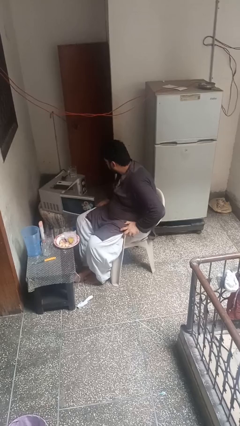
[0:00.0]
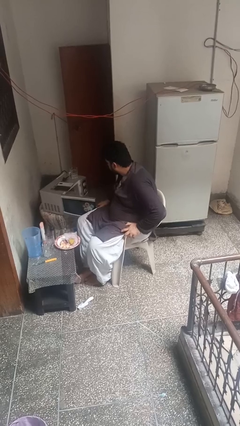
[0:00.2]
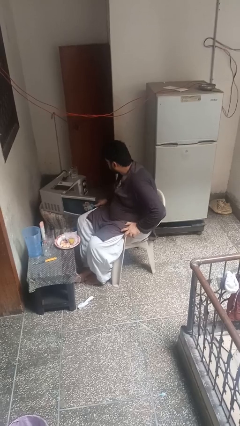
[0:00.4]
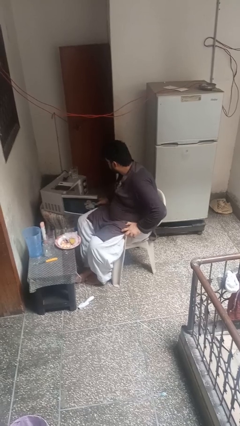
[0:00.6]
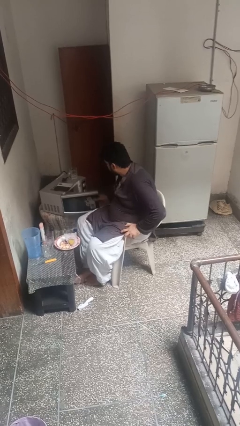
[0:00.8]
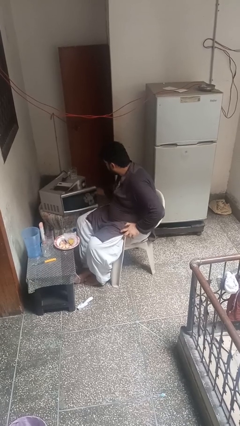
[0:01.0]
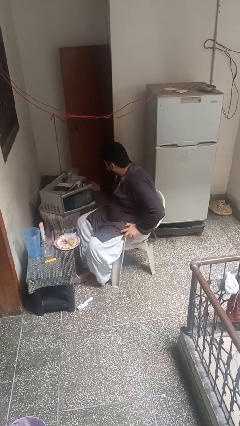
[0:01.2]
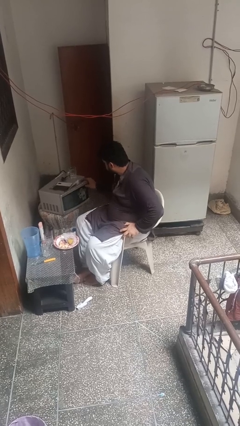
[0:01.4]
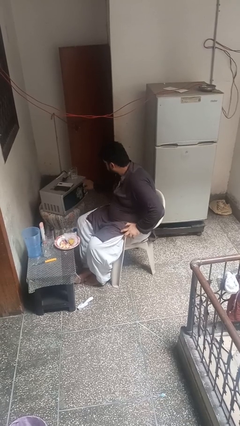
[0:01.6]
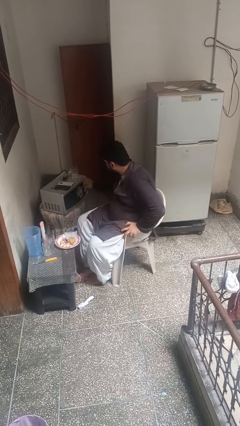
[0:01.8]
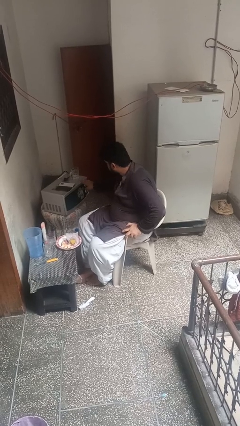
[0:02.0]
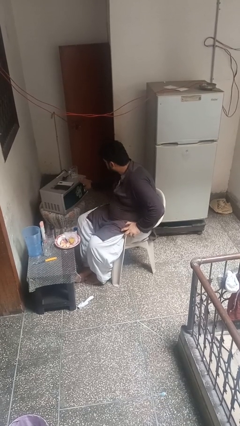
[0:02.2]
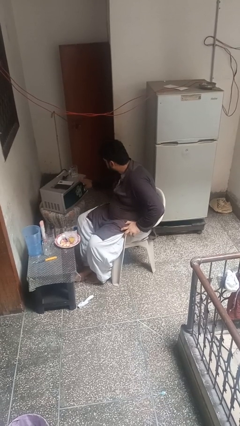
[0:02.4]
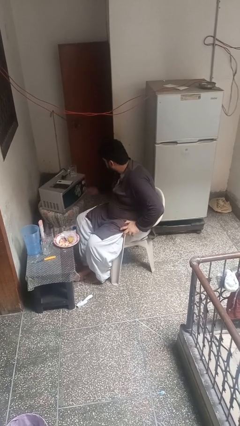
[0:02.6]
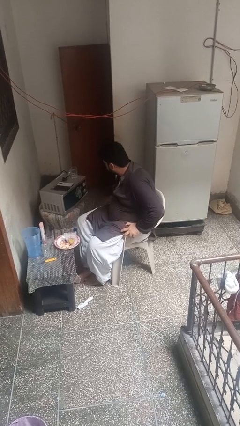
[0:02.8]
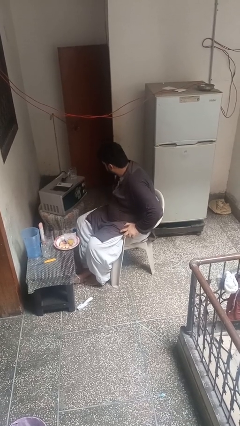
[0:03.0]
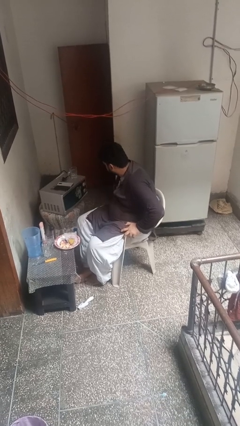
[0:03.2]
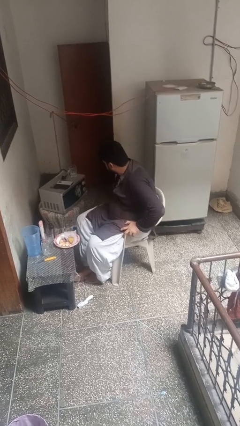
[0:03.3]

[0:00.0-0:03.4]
person closes microwave

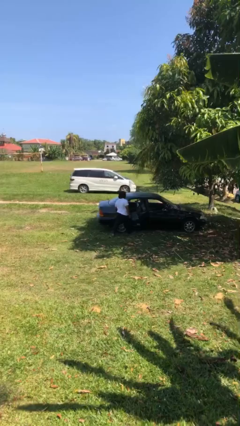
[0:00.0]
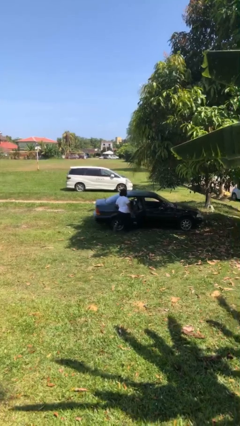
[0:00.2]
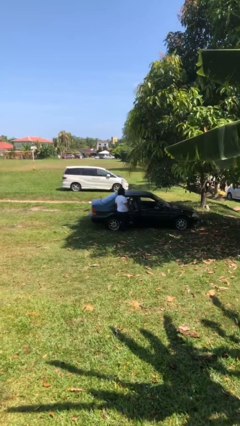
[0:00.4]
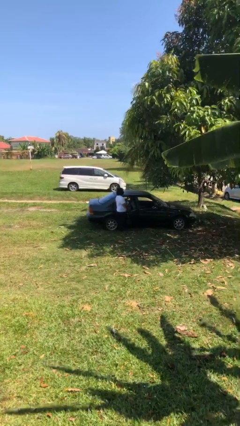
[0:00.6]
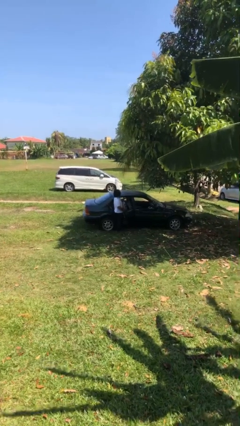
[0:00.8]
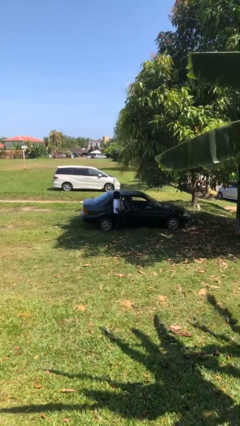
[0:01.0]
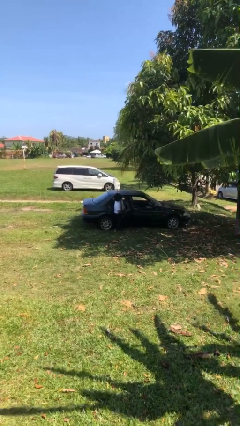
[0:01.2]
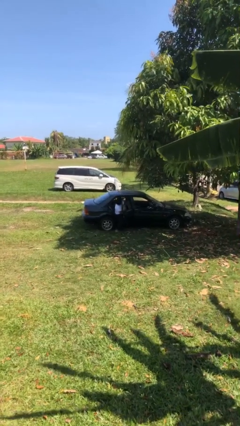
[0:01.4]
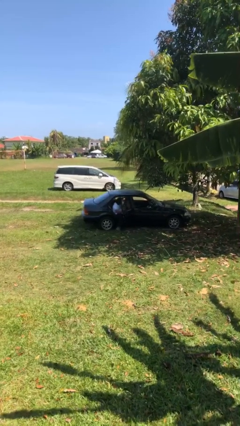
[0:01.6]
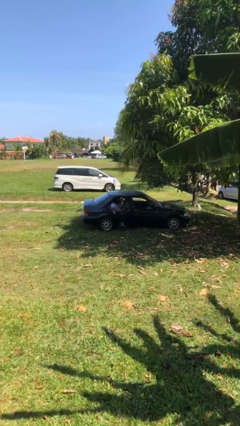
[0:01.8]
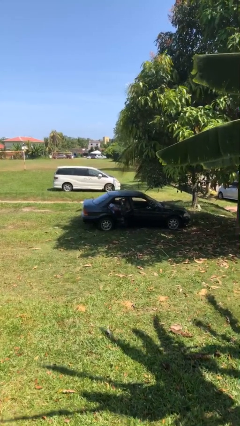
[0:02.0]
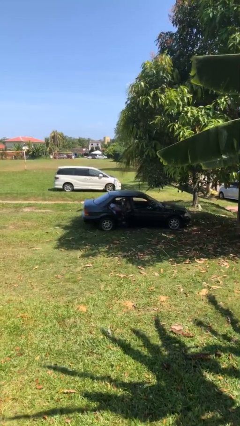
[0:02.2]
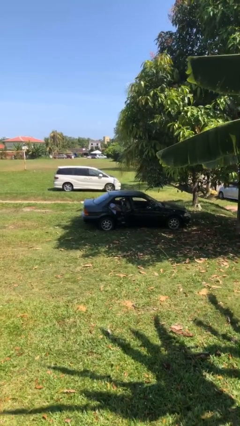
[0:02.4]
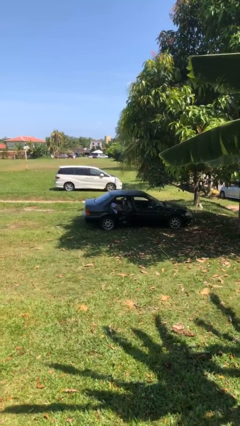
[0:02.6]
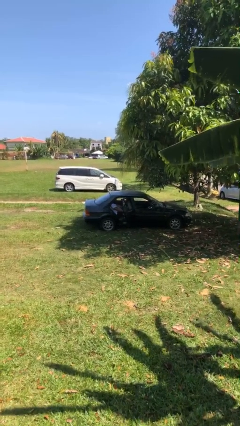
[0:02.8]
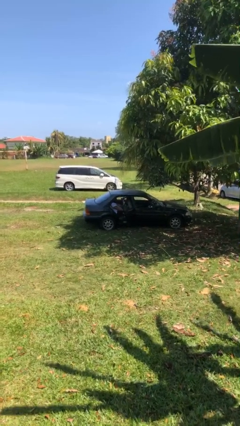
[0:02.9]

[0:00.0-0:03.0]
person enters car

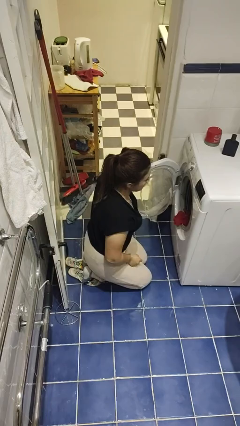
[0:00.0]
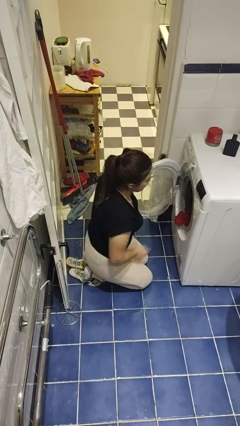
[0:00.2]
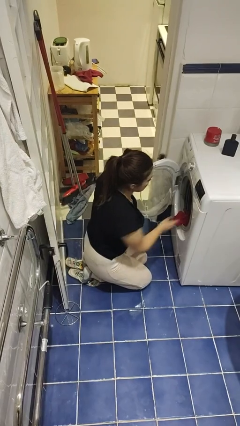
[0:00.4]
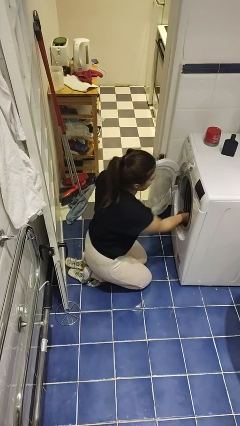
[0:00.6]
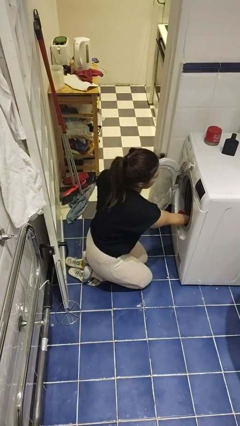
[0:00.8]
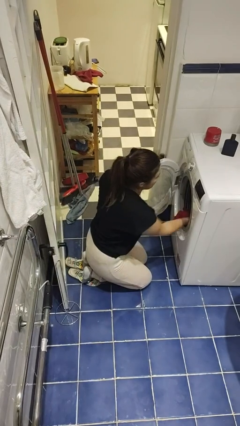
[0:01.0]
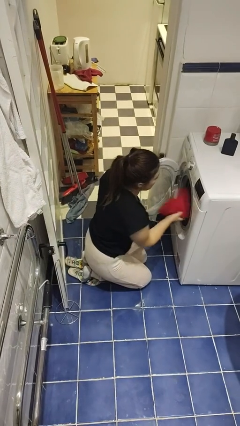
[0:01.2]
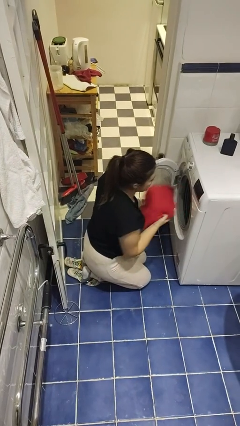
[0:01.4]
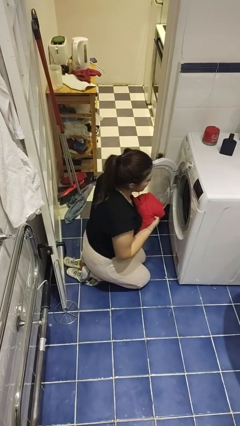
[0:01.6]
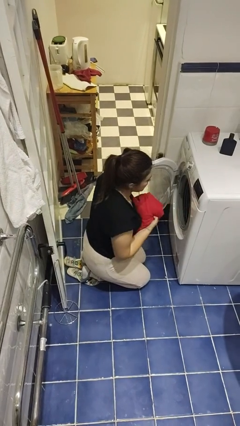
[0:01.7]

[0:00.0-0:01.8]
person unloads dryer

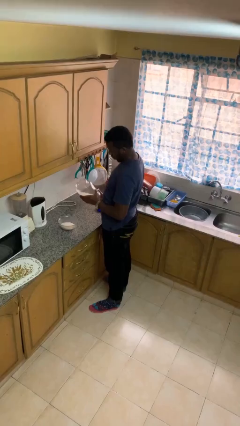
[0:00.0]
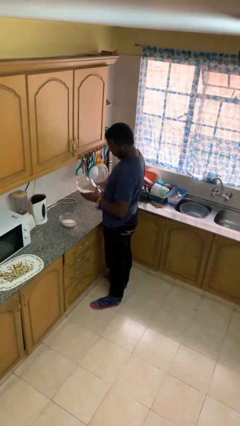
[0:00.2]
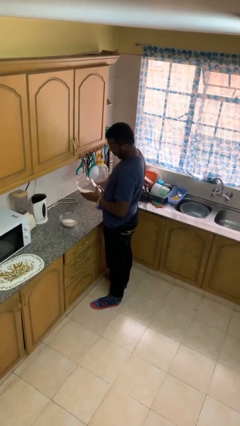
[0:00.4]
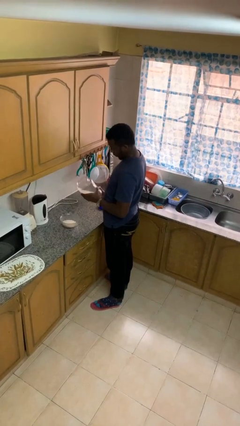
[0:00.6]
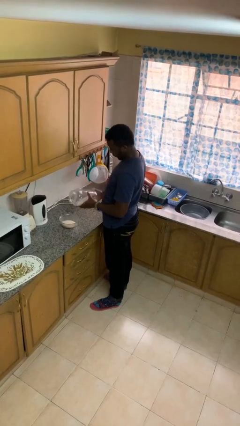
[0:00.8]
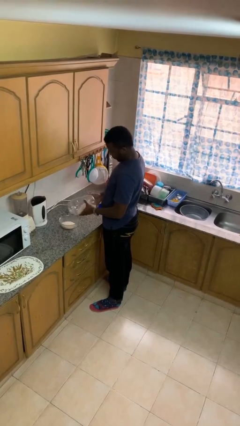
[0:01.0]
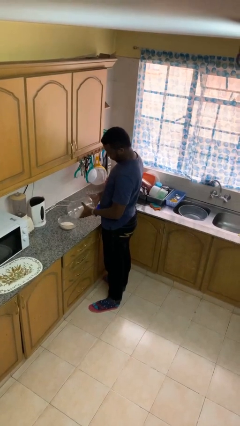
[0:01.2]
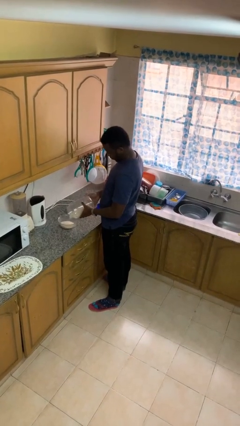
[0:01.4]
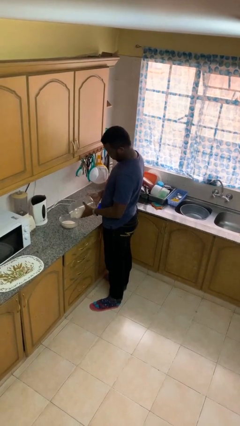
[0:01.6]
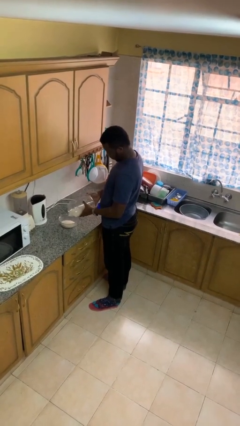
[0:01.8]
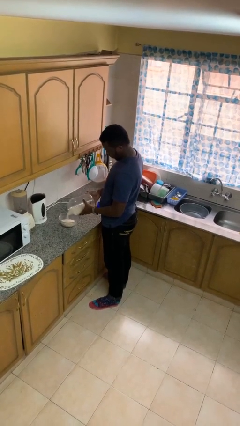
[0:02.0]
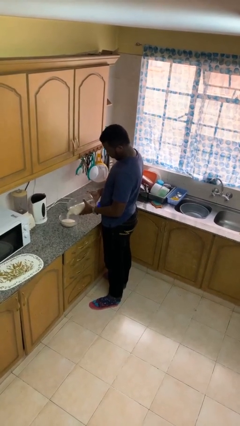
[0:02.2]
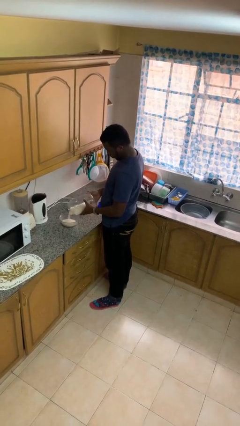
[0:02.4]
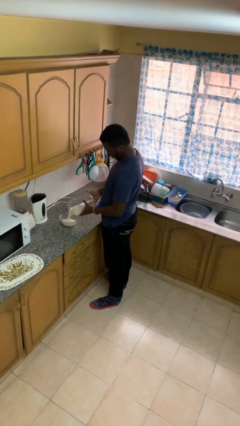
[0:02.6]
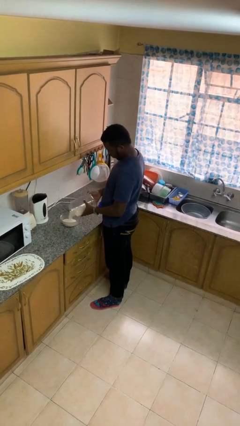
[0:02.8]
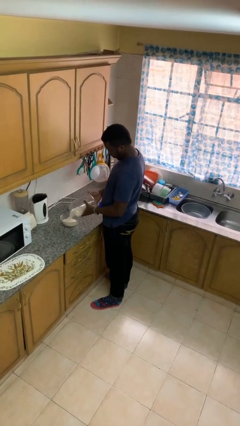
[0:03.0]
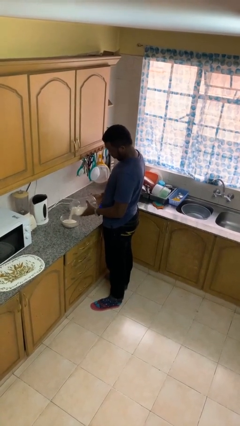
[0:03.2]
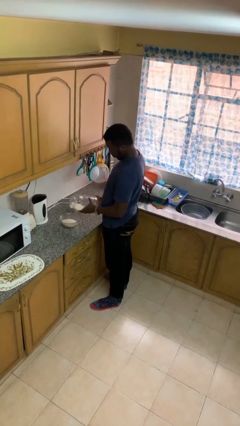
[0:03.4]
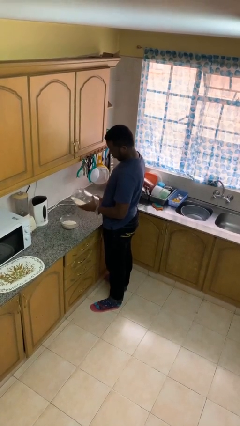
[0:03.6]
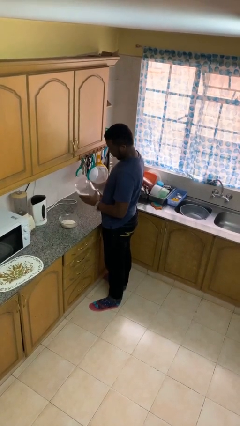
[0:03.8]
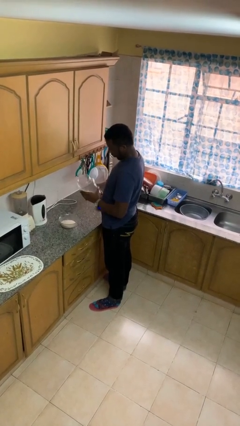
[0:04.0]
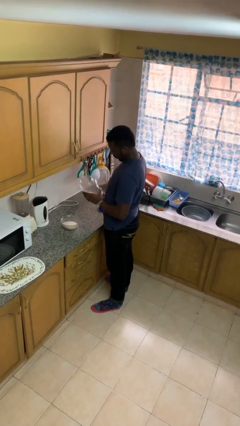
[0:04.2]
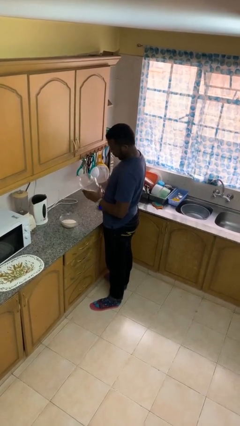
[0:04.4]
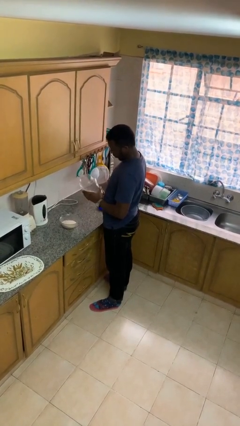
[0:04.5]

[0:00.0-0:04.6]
person pours into bowl

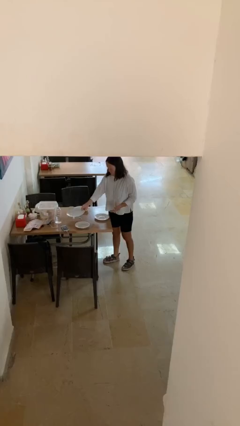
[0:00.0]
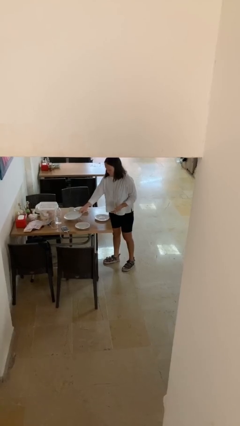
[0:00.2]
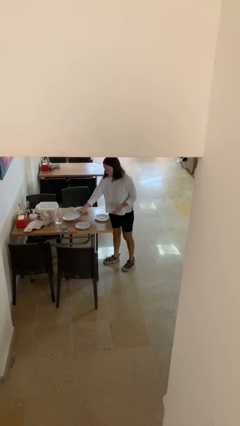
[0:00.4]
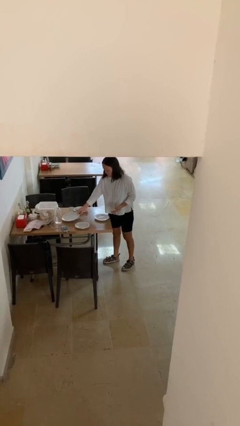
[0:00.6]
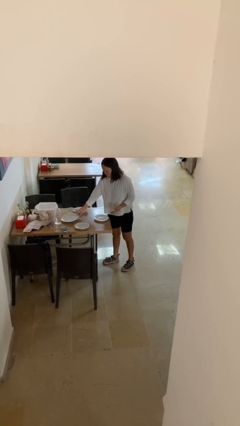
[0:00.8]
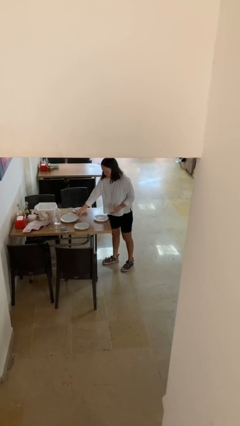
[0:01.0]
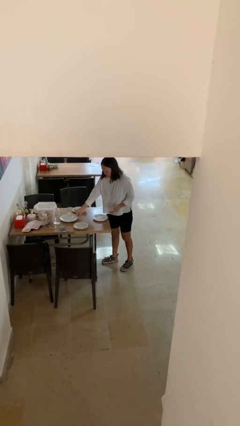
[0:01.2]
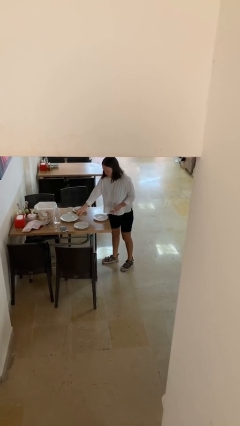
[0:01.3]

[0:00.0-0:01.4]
person sets table

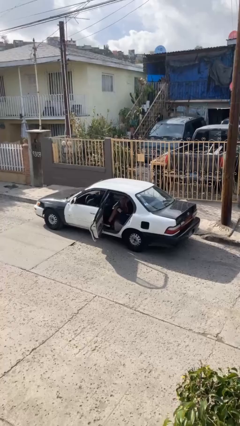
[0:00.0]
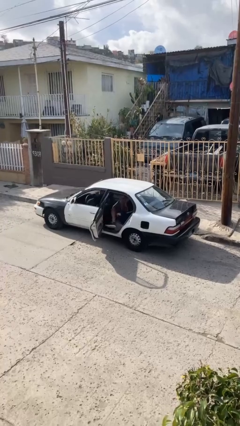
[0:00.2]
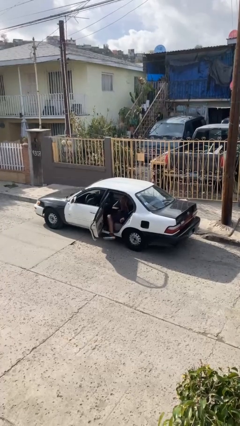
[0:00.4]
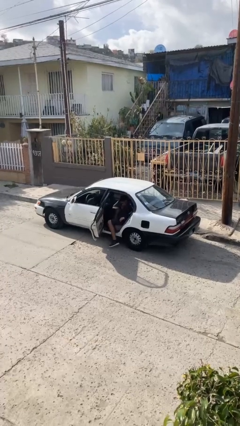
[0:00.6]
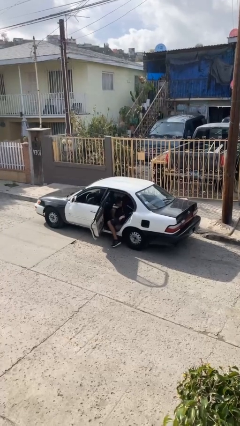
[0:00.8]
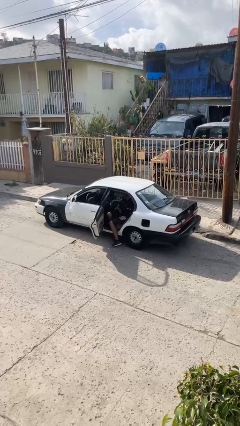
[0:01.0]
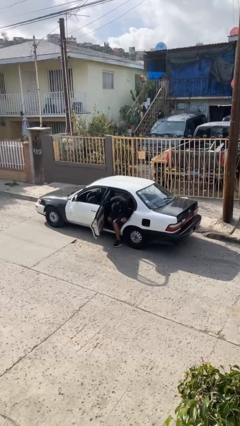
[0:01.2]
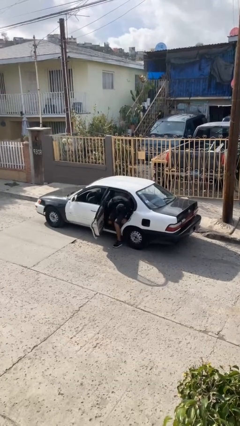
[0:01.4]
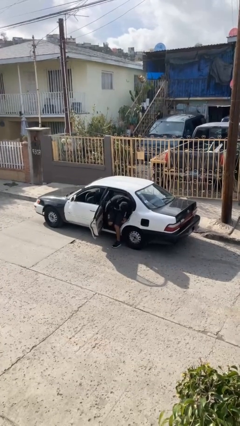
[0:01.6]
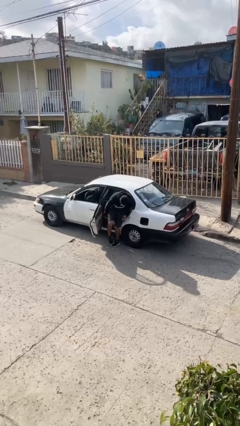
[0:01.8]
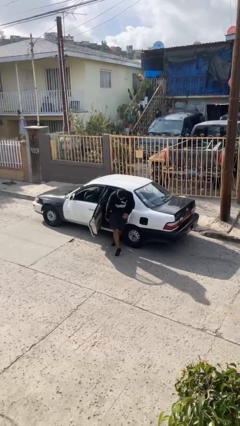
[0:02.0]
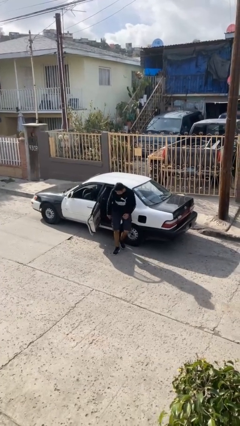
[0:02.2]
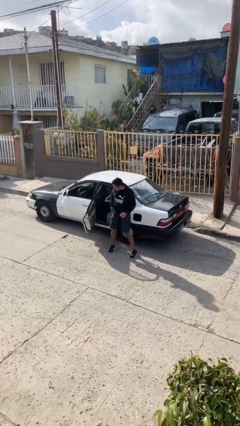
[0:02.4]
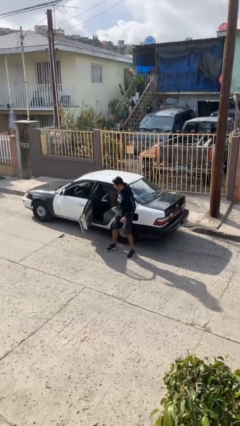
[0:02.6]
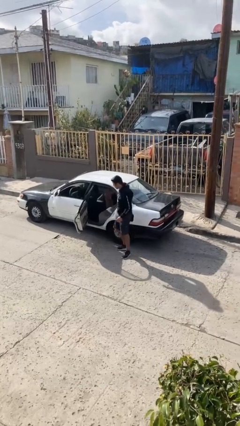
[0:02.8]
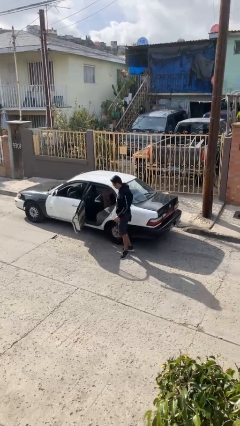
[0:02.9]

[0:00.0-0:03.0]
person exits car

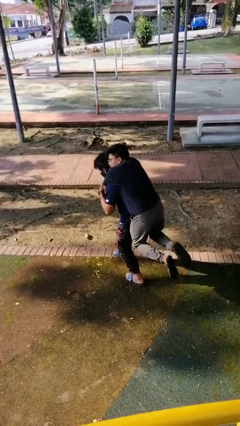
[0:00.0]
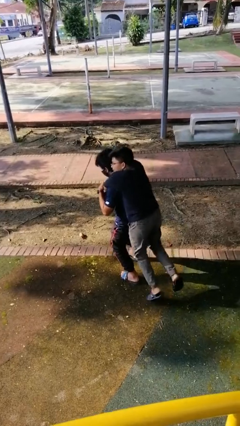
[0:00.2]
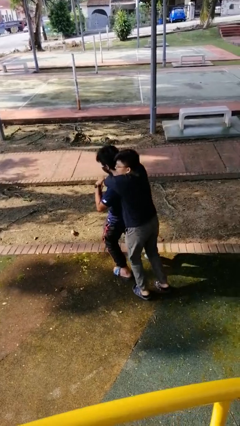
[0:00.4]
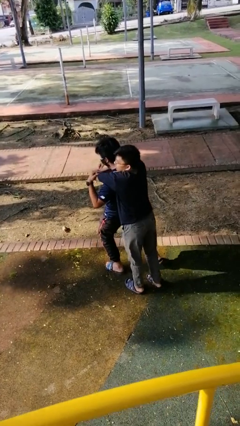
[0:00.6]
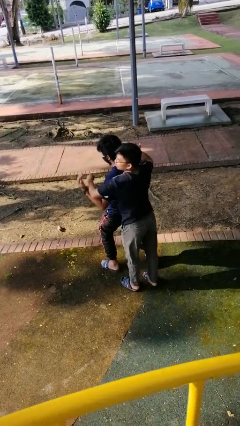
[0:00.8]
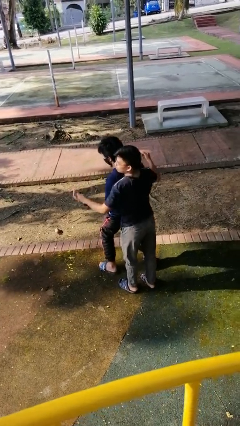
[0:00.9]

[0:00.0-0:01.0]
person puts down person
